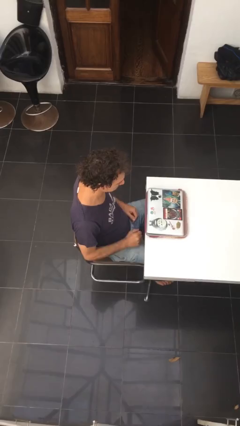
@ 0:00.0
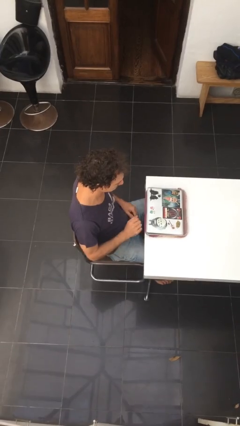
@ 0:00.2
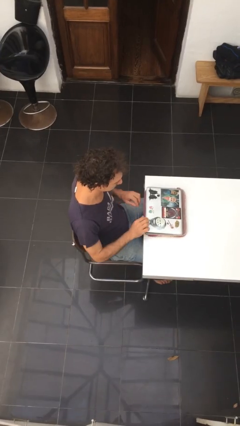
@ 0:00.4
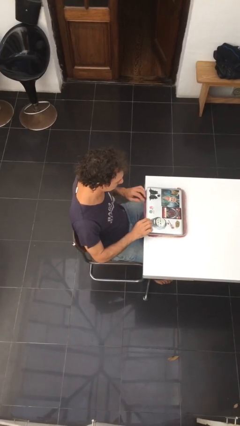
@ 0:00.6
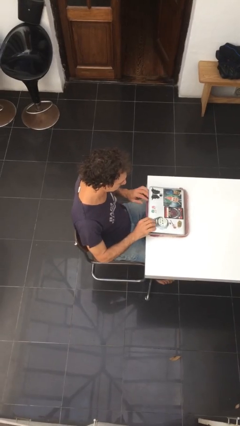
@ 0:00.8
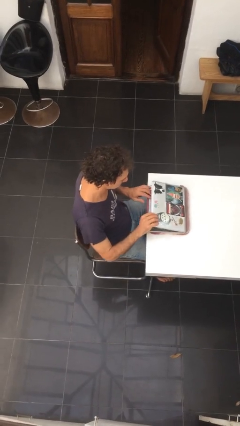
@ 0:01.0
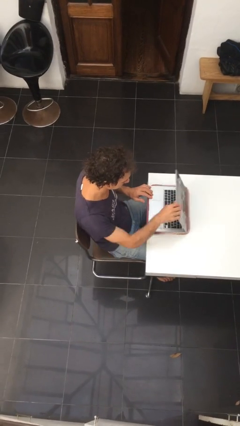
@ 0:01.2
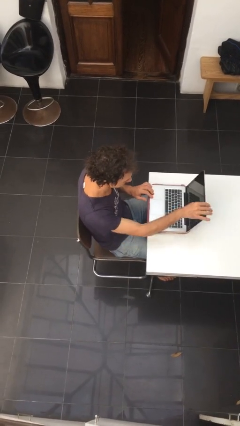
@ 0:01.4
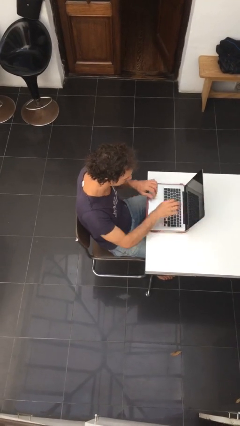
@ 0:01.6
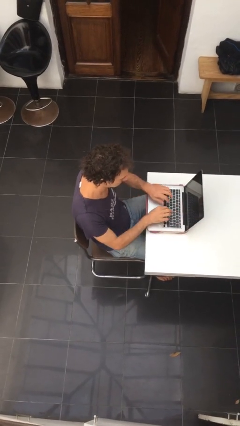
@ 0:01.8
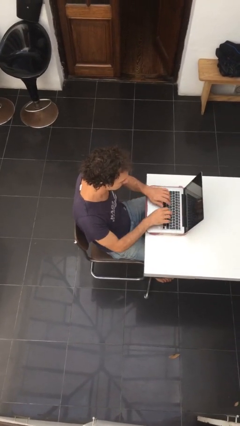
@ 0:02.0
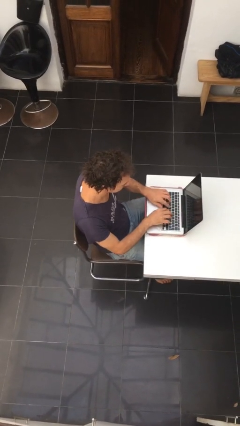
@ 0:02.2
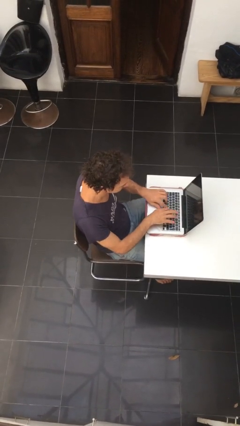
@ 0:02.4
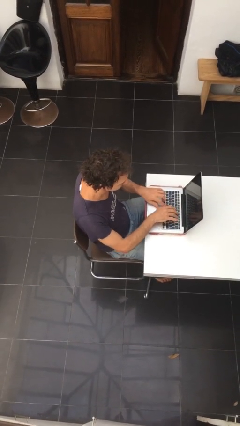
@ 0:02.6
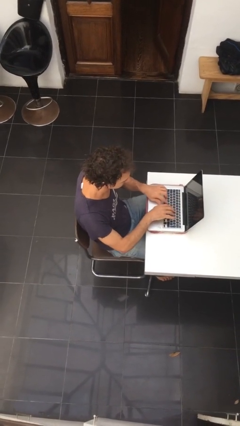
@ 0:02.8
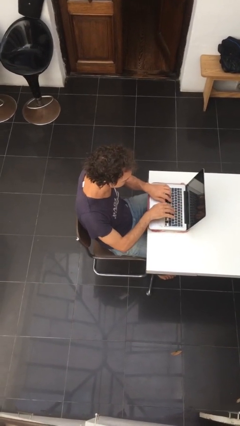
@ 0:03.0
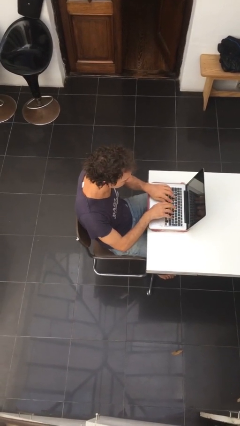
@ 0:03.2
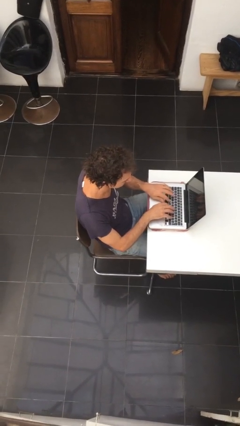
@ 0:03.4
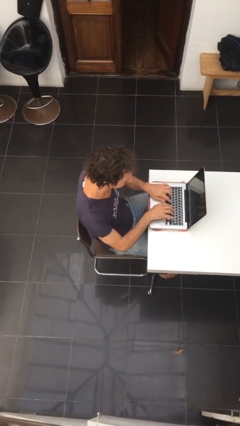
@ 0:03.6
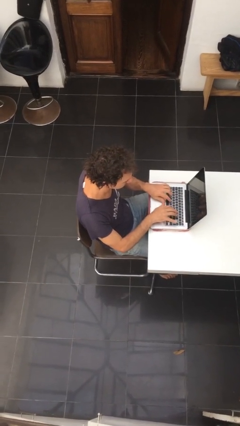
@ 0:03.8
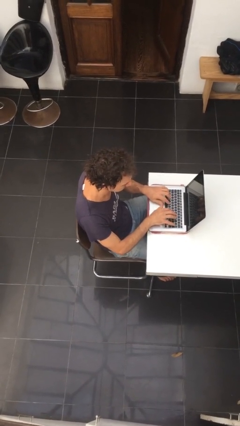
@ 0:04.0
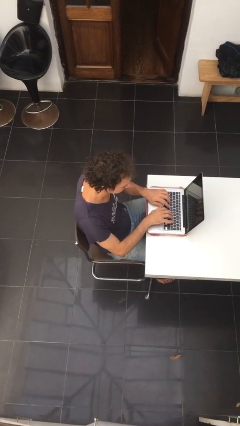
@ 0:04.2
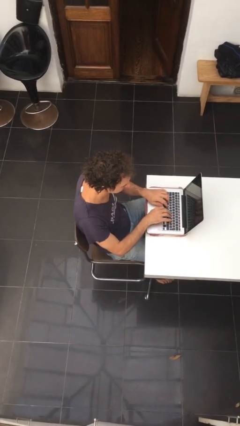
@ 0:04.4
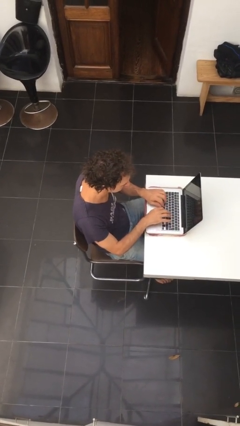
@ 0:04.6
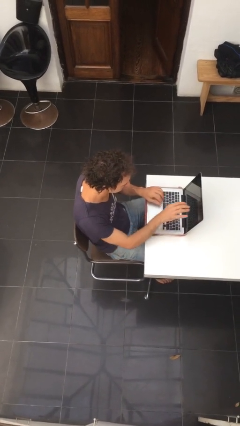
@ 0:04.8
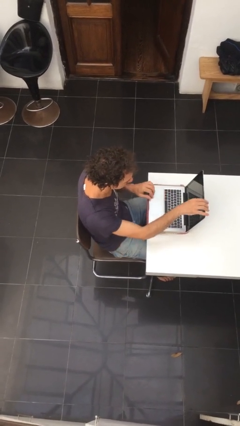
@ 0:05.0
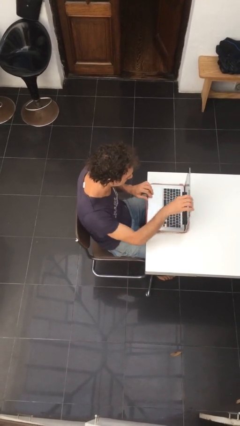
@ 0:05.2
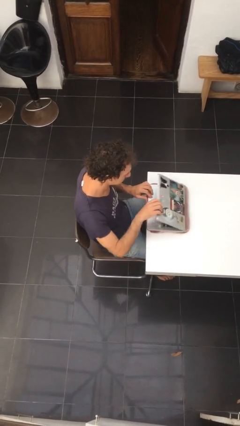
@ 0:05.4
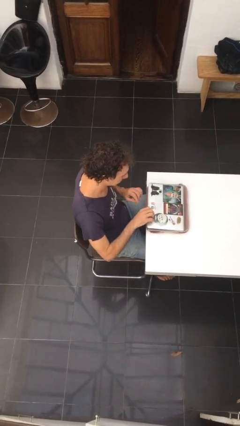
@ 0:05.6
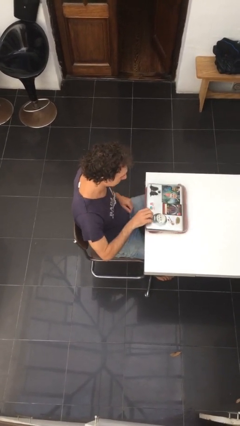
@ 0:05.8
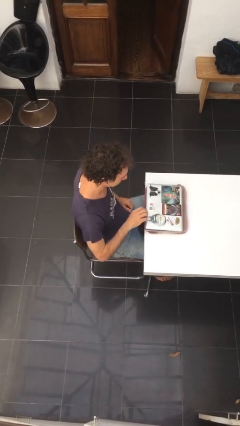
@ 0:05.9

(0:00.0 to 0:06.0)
person interacts with laptop

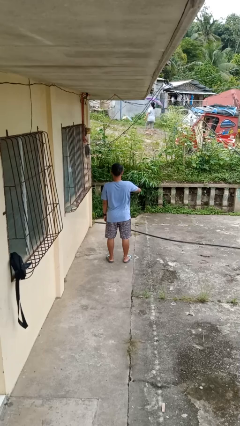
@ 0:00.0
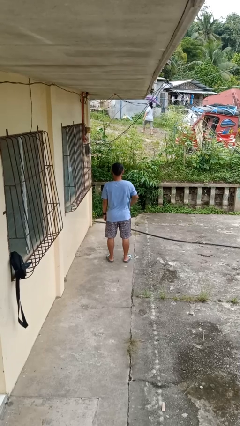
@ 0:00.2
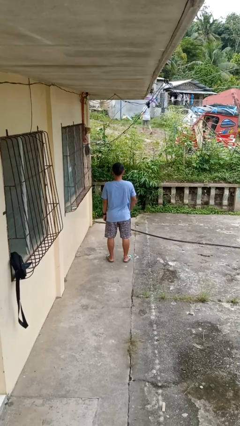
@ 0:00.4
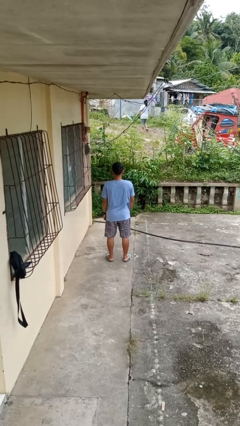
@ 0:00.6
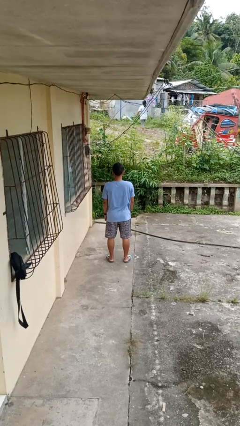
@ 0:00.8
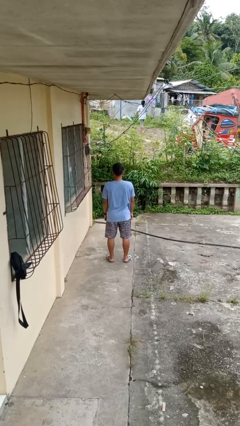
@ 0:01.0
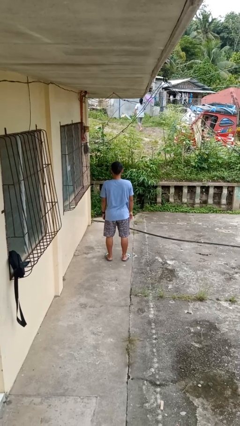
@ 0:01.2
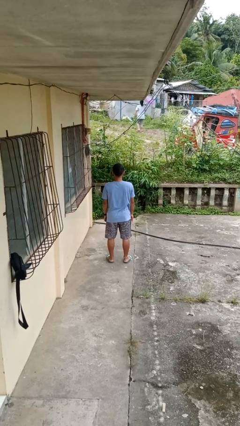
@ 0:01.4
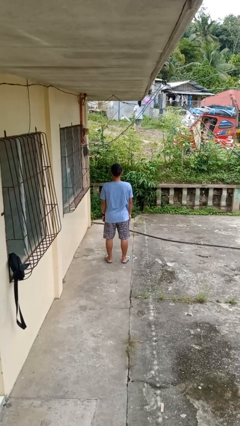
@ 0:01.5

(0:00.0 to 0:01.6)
person gestures swipe down

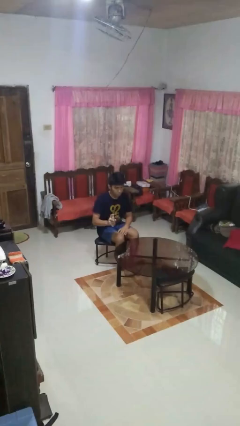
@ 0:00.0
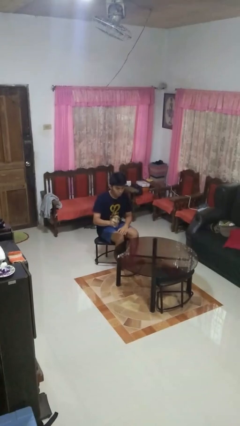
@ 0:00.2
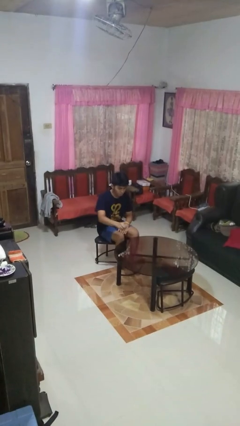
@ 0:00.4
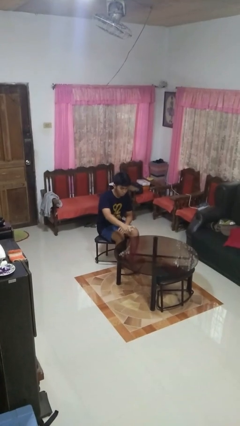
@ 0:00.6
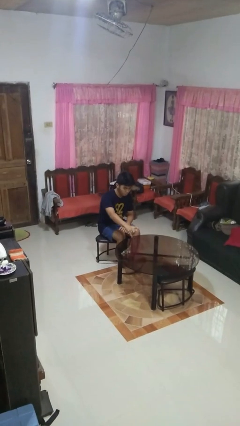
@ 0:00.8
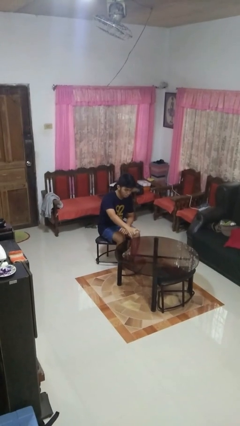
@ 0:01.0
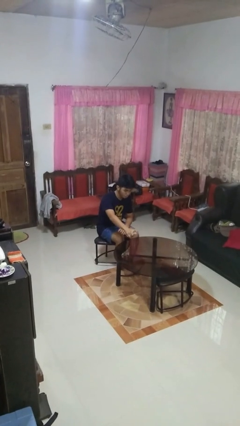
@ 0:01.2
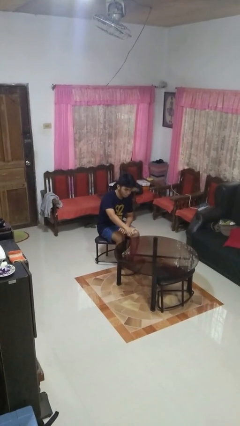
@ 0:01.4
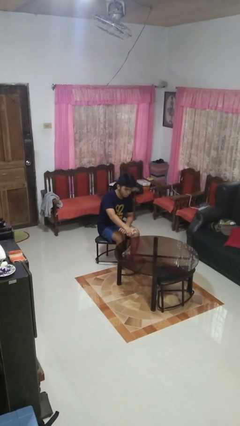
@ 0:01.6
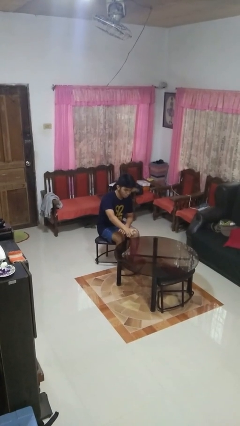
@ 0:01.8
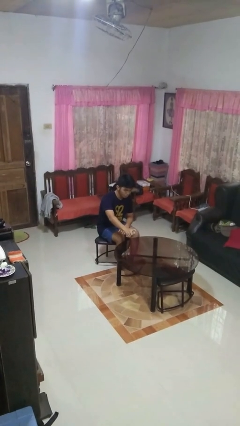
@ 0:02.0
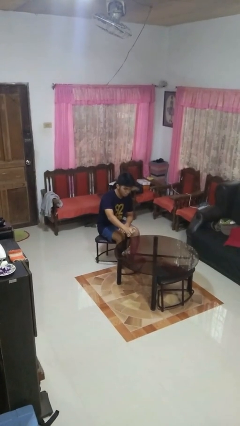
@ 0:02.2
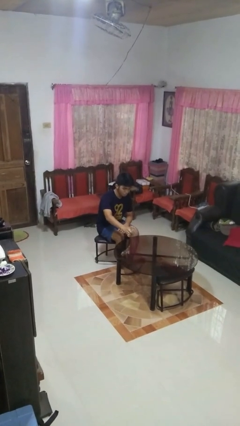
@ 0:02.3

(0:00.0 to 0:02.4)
person sprays from bottle

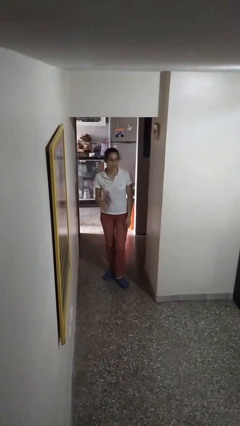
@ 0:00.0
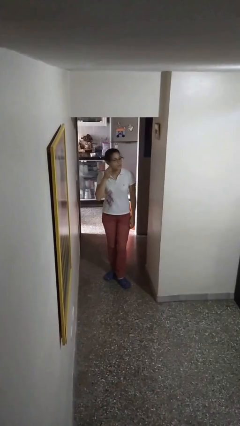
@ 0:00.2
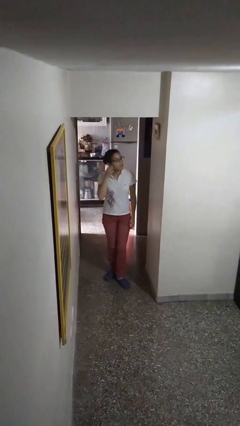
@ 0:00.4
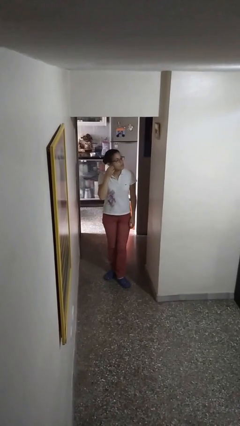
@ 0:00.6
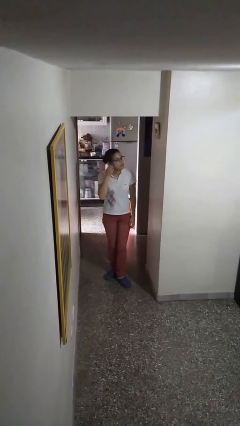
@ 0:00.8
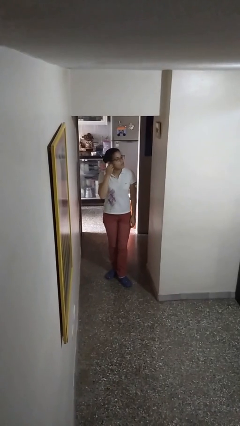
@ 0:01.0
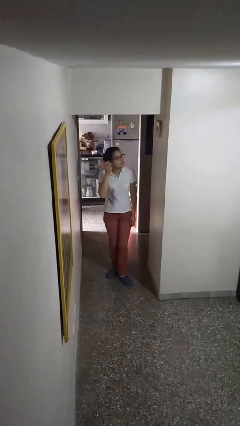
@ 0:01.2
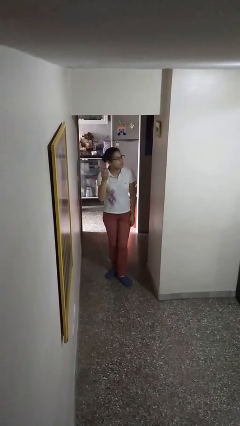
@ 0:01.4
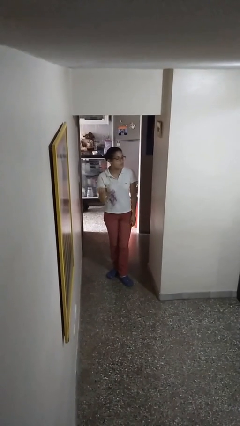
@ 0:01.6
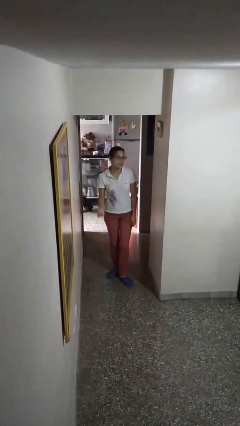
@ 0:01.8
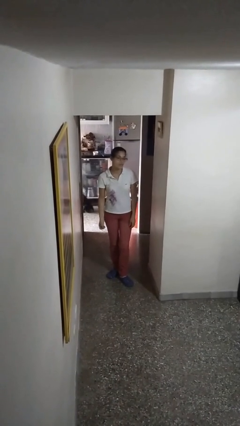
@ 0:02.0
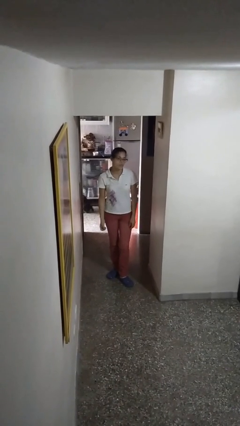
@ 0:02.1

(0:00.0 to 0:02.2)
person takes off earrings

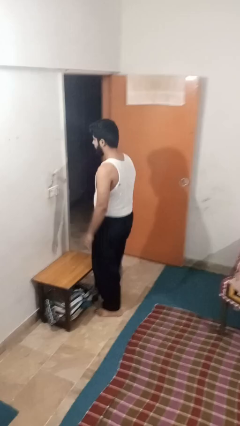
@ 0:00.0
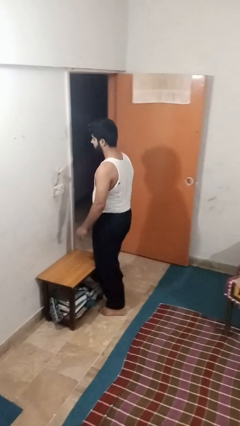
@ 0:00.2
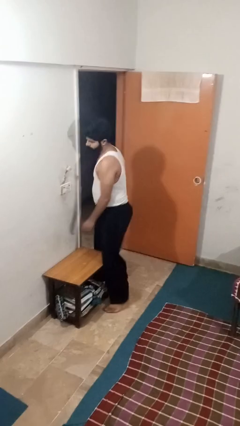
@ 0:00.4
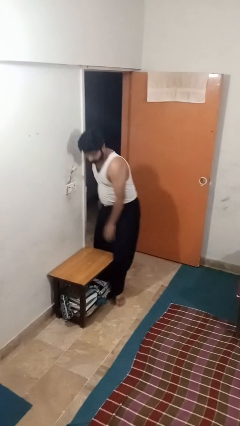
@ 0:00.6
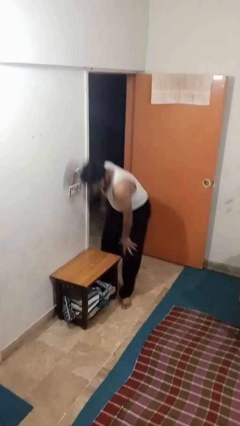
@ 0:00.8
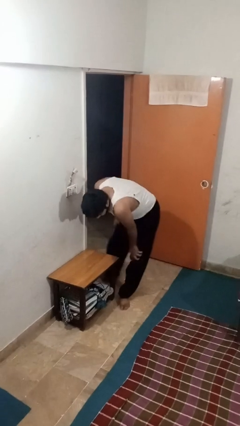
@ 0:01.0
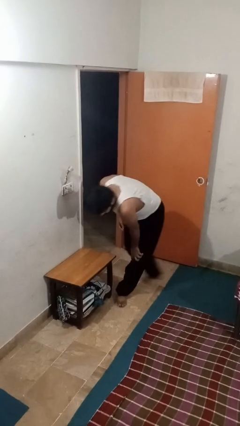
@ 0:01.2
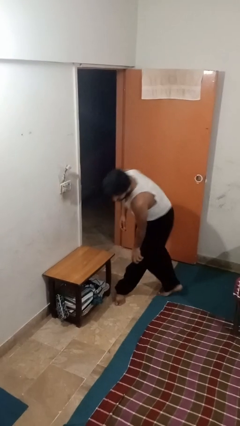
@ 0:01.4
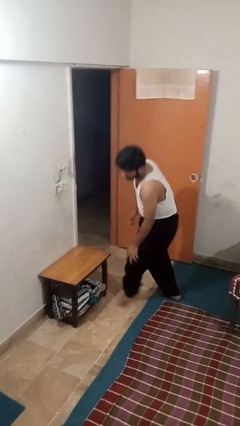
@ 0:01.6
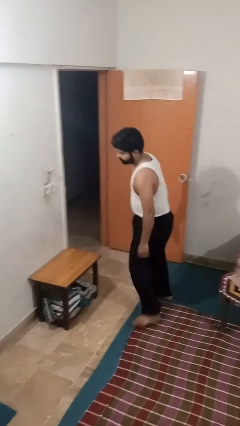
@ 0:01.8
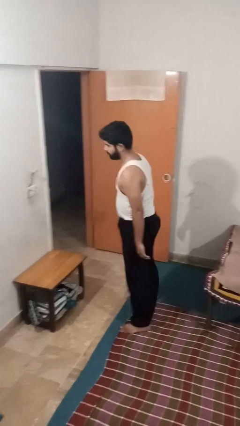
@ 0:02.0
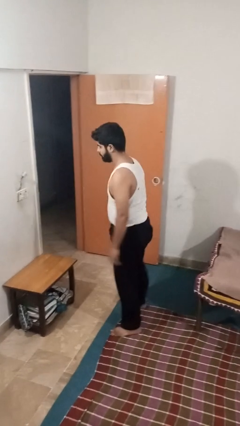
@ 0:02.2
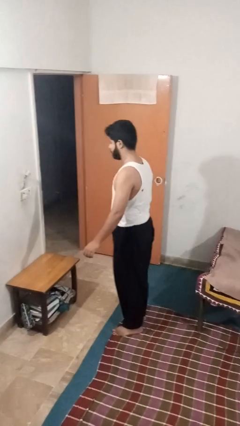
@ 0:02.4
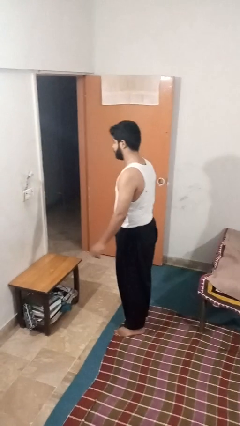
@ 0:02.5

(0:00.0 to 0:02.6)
person bumps into table

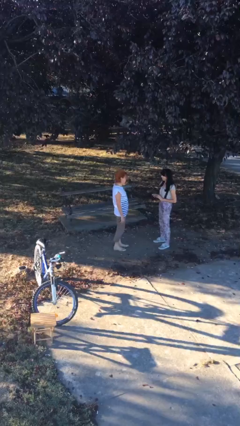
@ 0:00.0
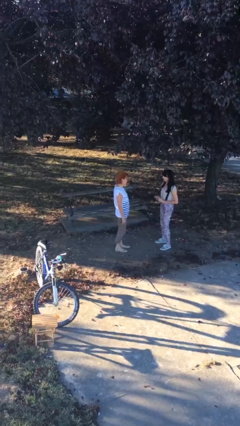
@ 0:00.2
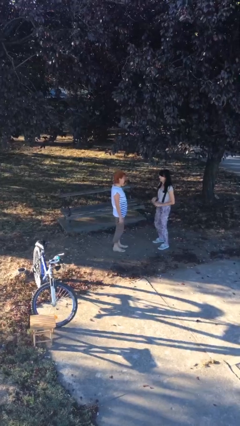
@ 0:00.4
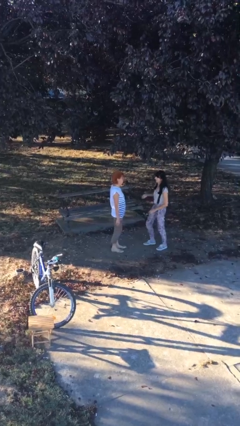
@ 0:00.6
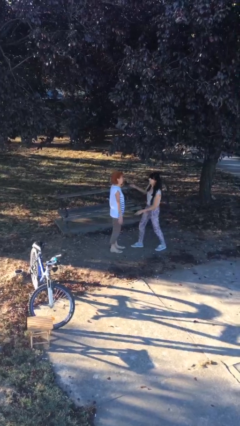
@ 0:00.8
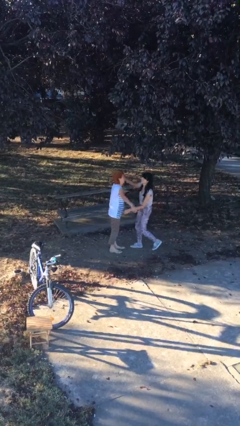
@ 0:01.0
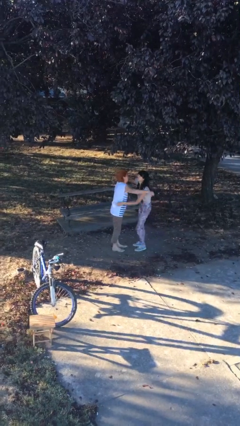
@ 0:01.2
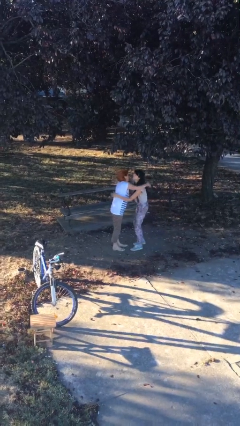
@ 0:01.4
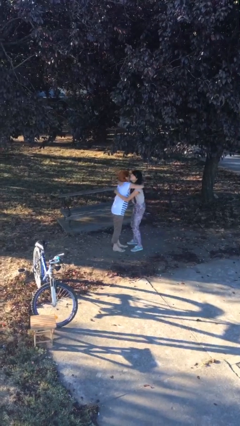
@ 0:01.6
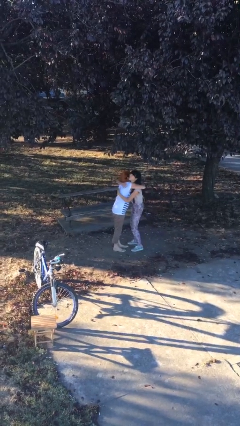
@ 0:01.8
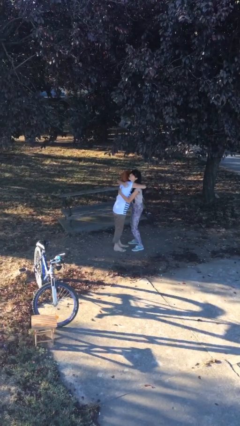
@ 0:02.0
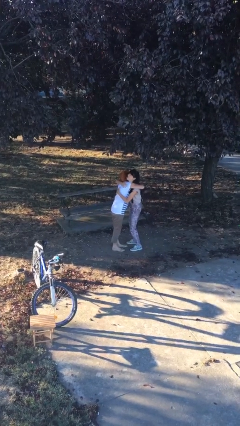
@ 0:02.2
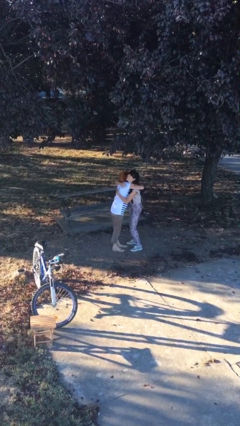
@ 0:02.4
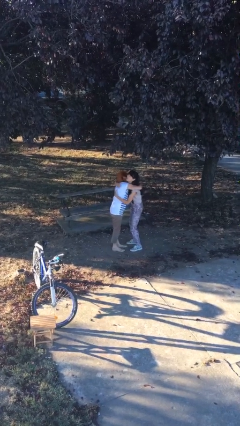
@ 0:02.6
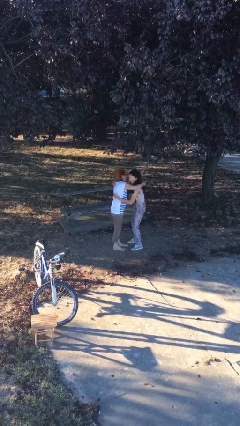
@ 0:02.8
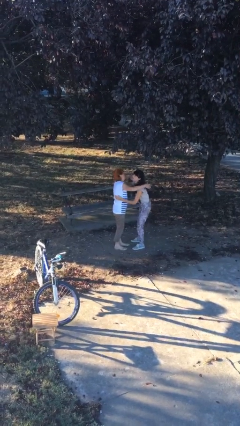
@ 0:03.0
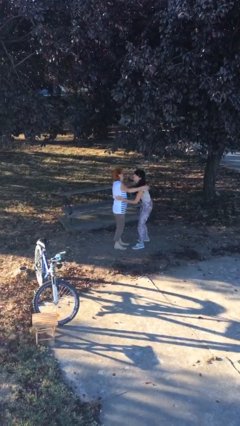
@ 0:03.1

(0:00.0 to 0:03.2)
person embraces person
